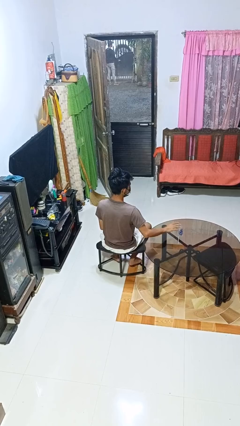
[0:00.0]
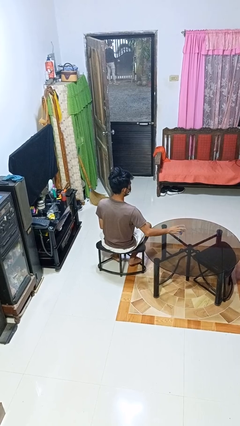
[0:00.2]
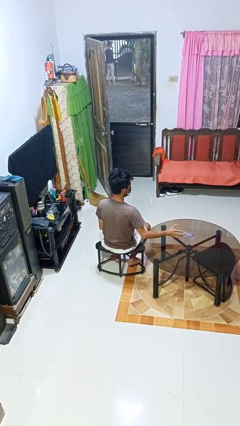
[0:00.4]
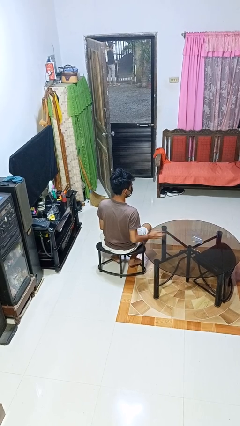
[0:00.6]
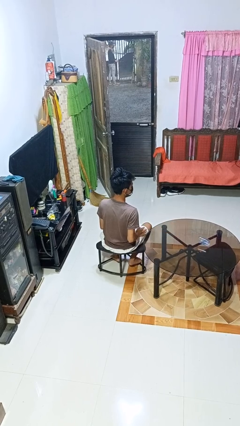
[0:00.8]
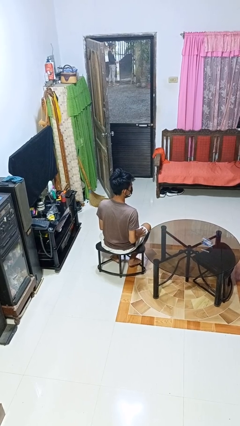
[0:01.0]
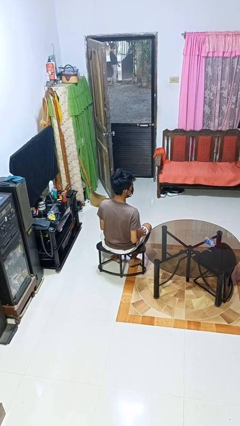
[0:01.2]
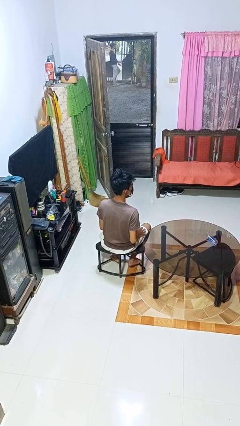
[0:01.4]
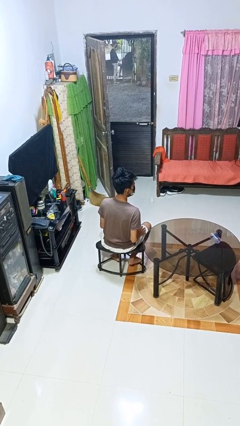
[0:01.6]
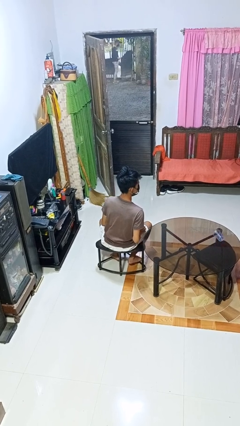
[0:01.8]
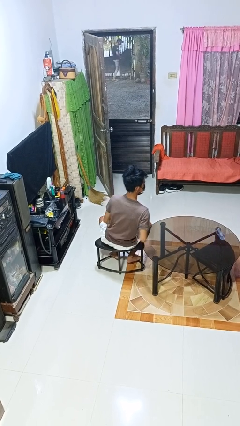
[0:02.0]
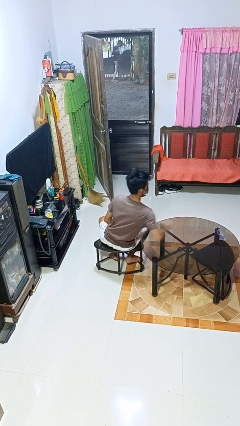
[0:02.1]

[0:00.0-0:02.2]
person knocks over glass

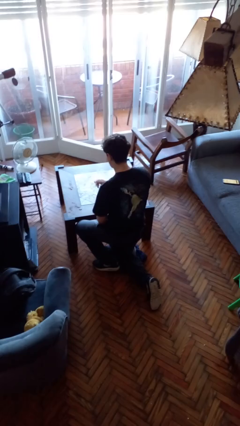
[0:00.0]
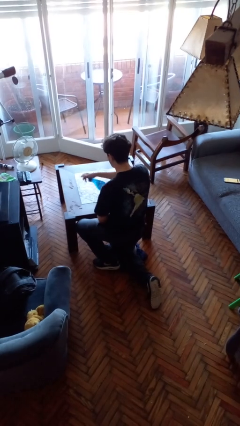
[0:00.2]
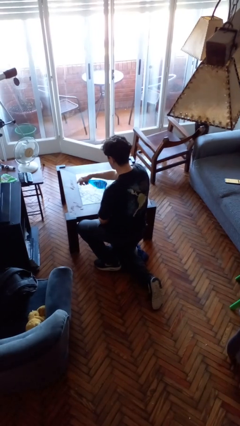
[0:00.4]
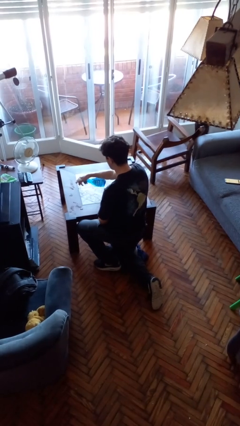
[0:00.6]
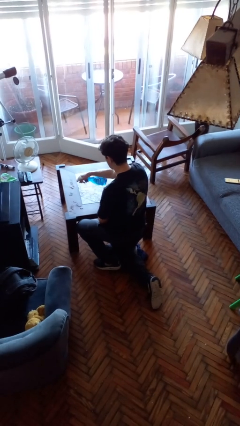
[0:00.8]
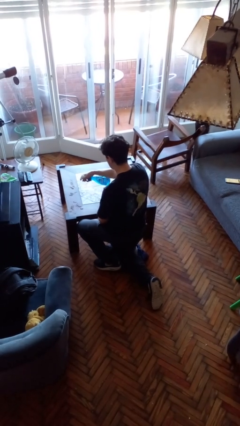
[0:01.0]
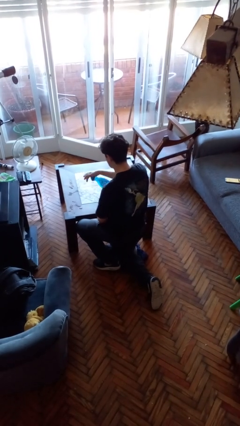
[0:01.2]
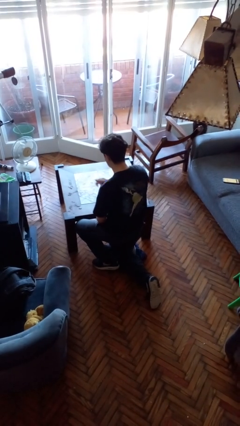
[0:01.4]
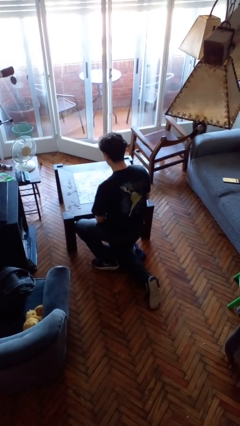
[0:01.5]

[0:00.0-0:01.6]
person sprays from bottle

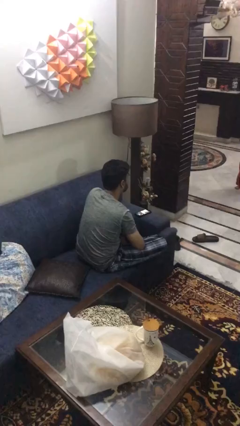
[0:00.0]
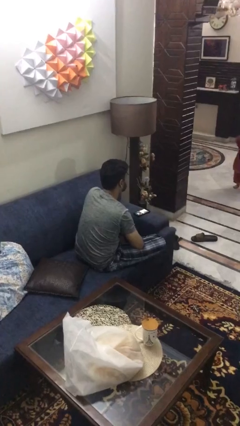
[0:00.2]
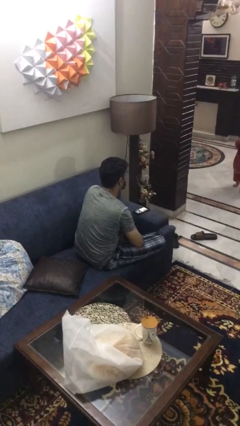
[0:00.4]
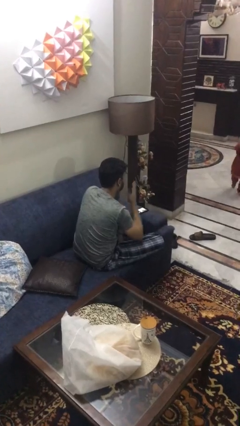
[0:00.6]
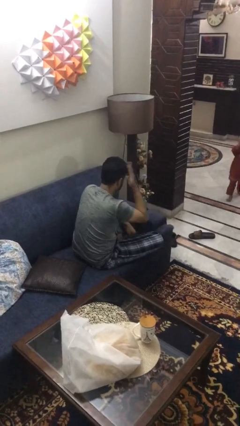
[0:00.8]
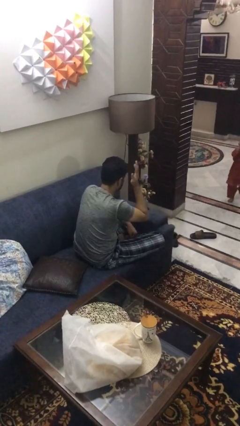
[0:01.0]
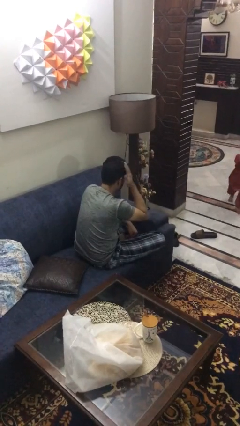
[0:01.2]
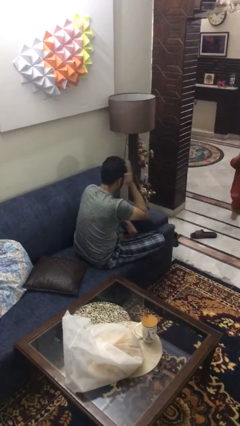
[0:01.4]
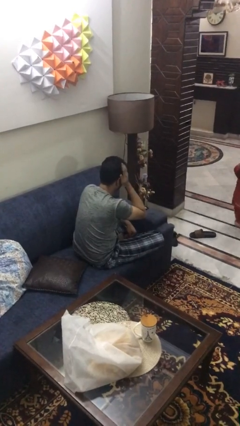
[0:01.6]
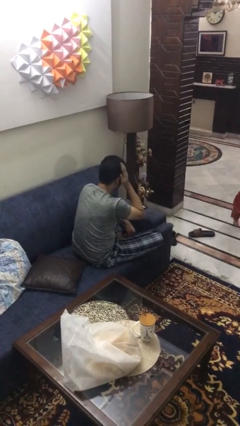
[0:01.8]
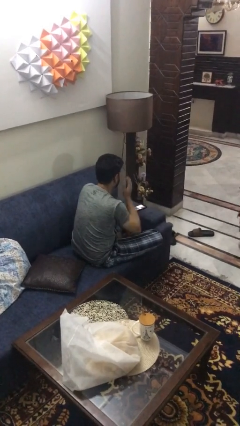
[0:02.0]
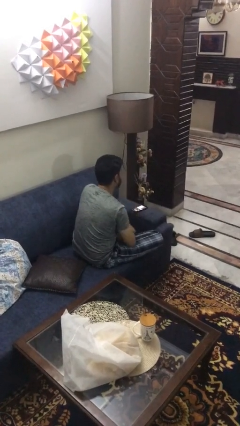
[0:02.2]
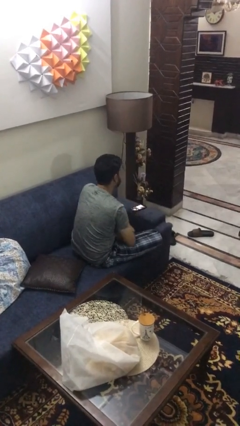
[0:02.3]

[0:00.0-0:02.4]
person strokes hair

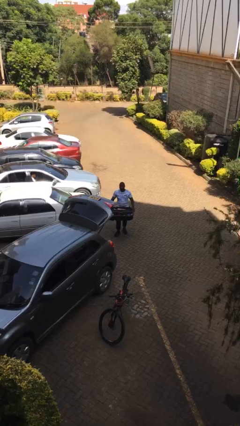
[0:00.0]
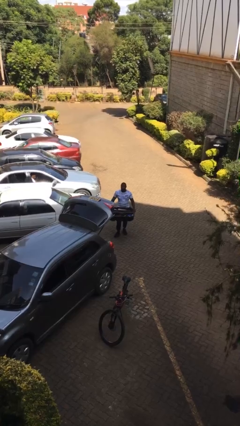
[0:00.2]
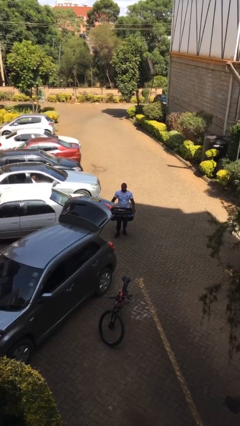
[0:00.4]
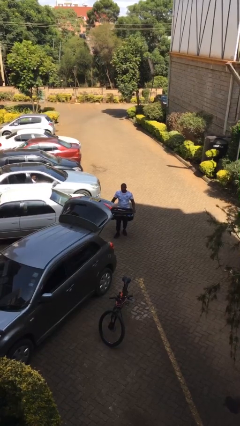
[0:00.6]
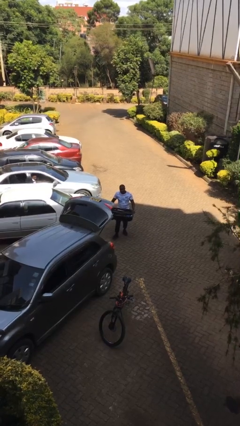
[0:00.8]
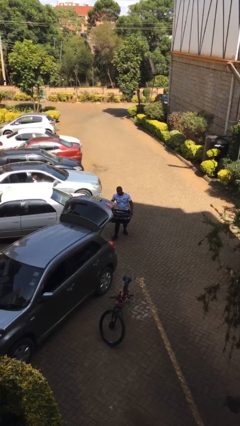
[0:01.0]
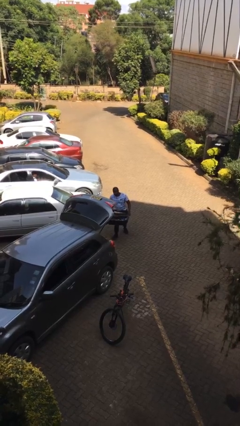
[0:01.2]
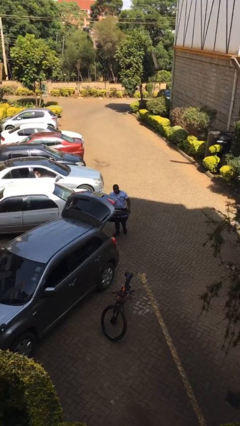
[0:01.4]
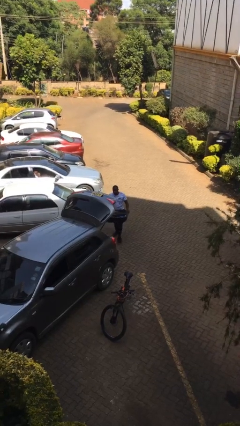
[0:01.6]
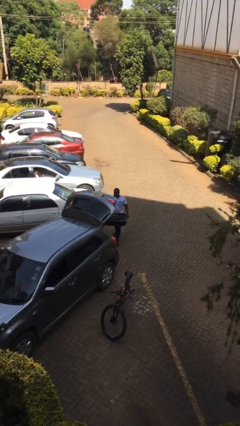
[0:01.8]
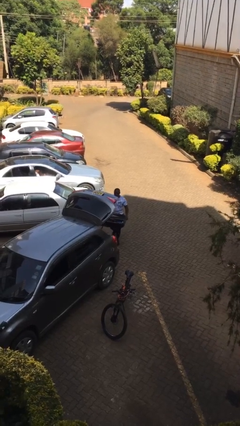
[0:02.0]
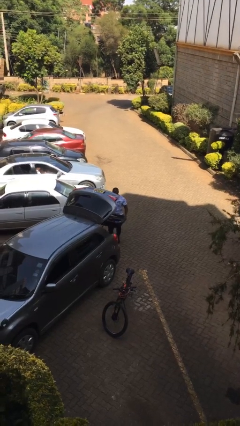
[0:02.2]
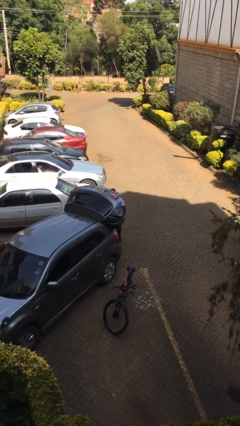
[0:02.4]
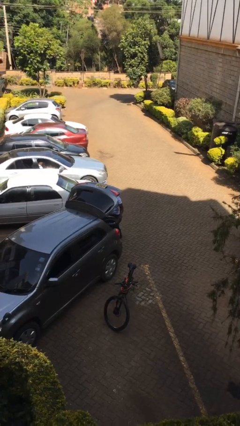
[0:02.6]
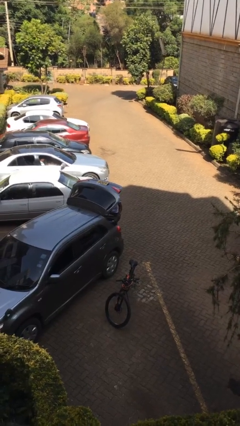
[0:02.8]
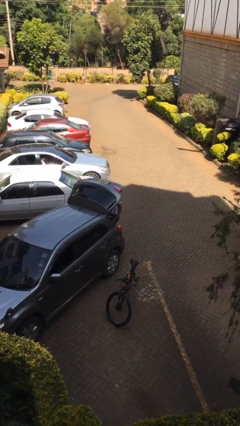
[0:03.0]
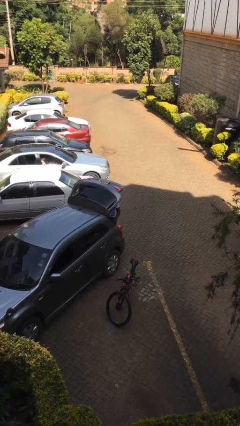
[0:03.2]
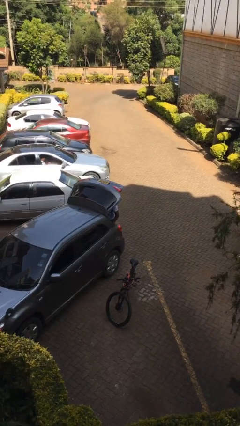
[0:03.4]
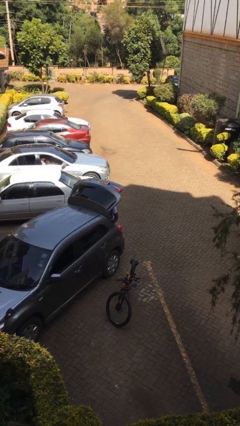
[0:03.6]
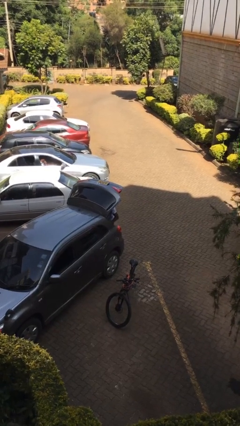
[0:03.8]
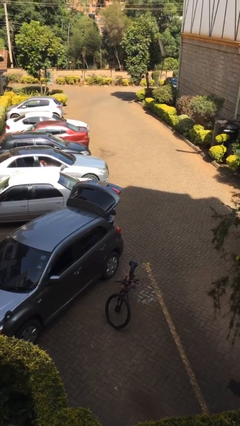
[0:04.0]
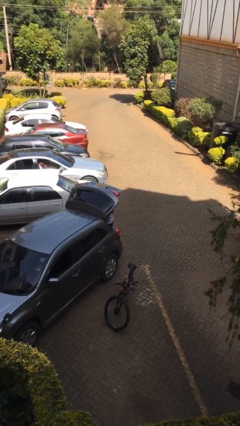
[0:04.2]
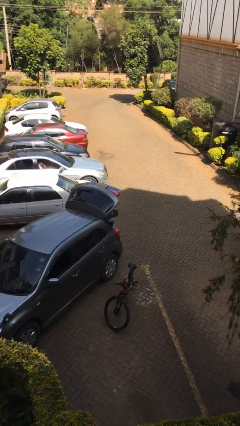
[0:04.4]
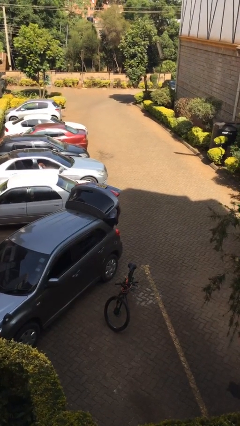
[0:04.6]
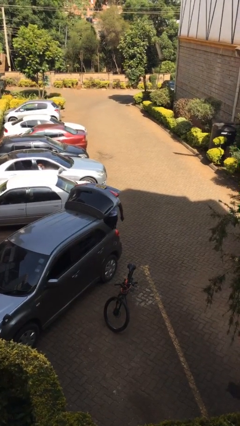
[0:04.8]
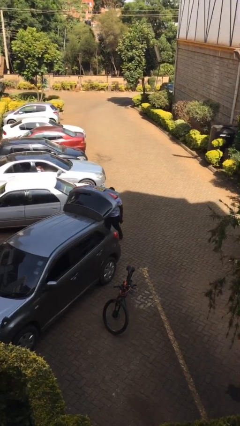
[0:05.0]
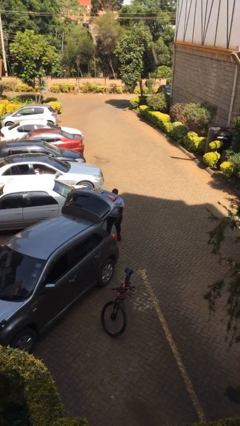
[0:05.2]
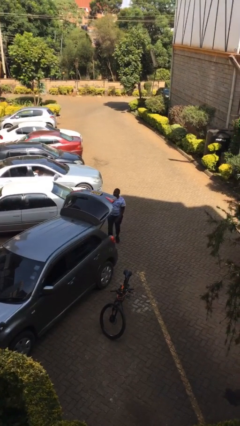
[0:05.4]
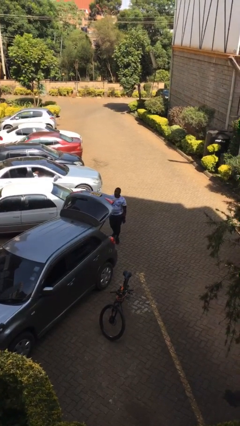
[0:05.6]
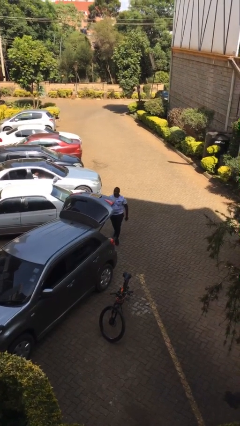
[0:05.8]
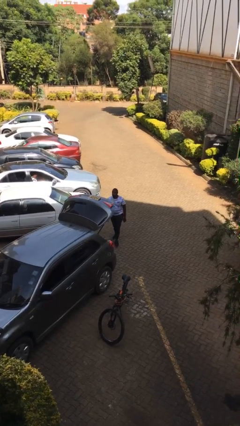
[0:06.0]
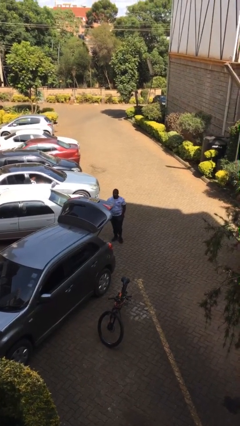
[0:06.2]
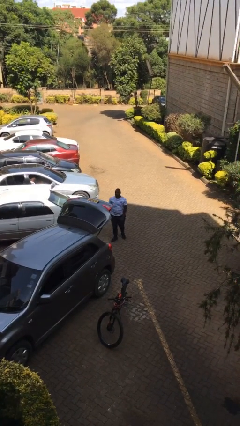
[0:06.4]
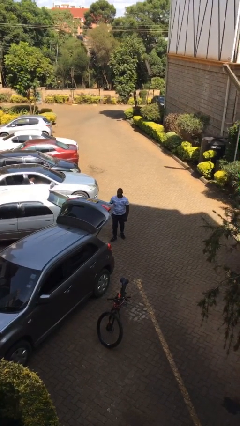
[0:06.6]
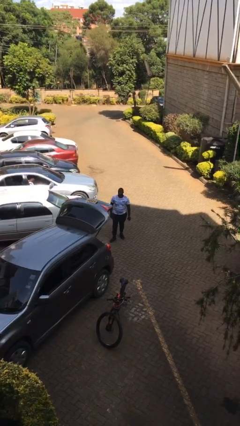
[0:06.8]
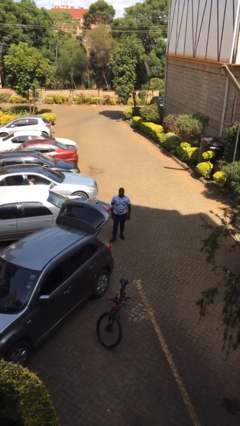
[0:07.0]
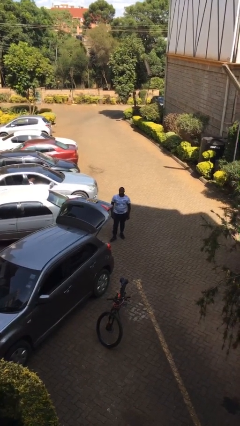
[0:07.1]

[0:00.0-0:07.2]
person loads car

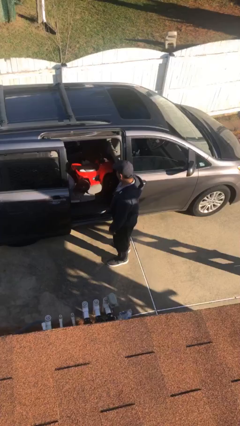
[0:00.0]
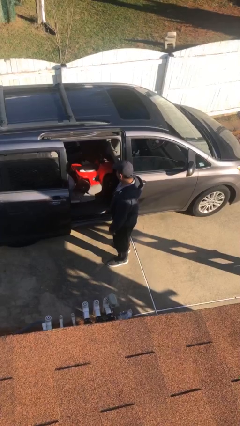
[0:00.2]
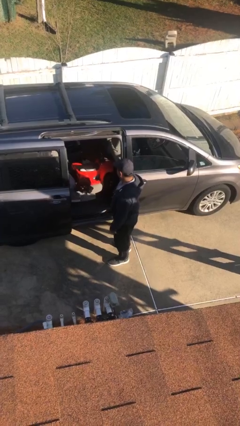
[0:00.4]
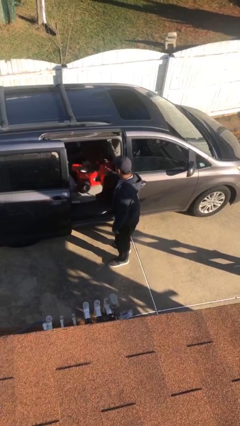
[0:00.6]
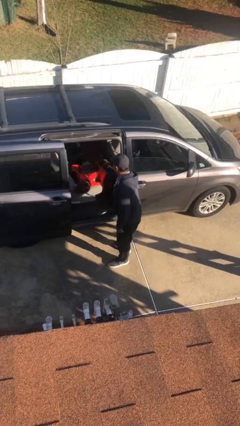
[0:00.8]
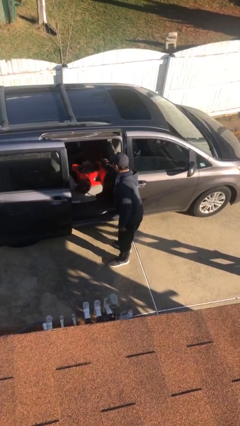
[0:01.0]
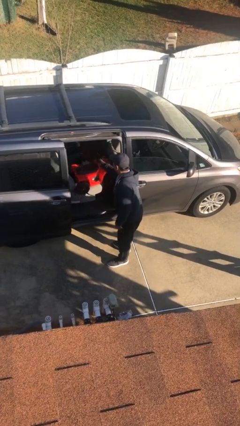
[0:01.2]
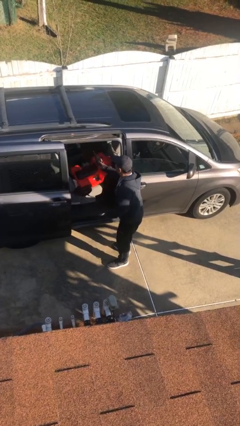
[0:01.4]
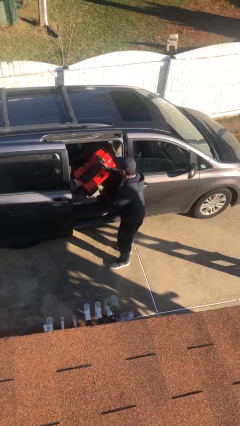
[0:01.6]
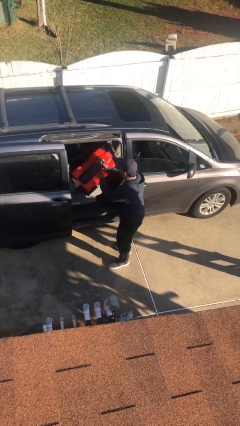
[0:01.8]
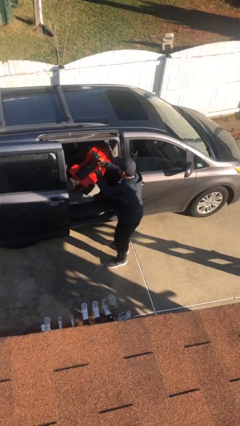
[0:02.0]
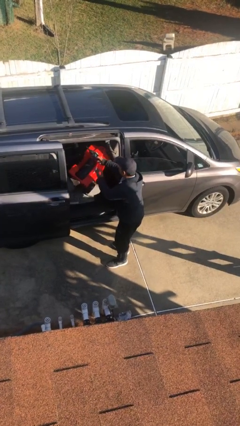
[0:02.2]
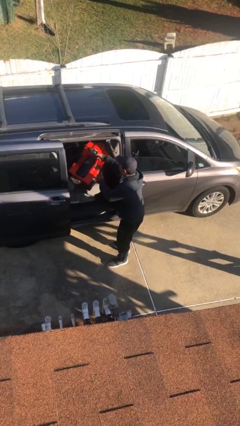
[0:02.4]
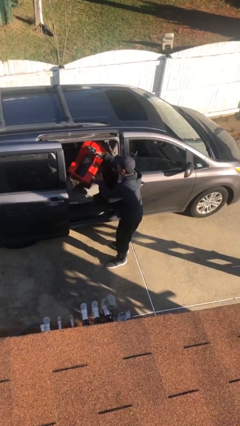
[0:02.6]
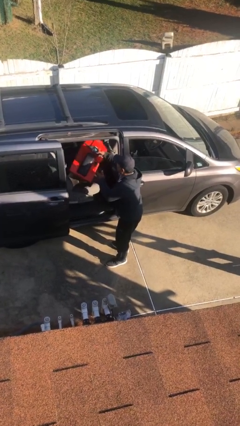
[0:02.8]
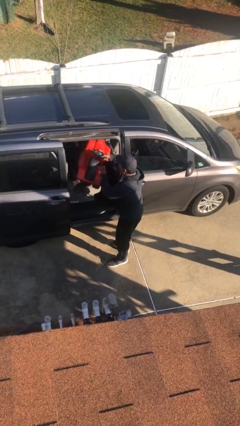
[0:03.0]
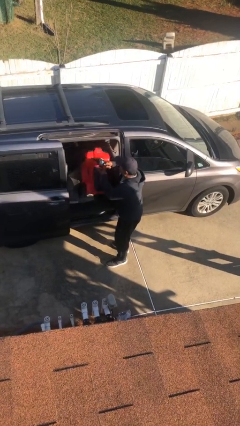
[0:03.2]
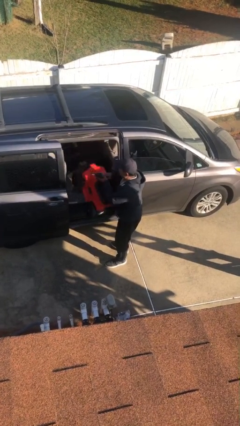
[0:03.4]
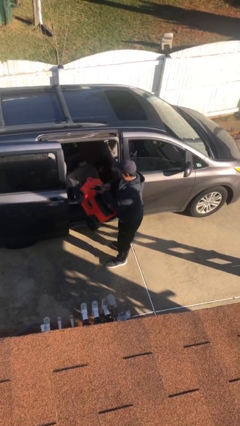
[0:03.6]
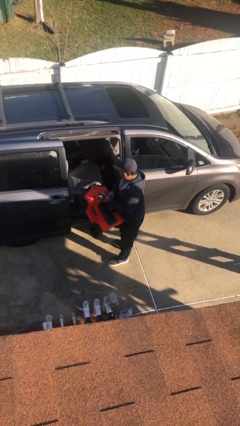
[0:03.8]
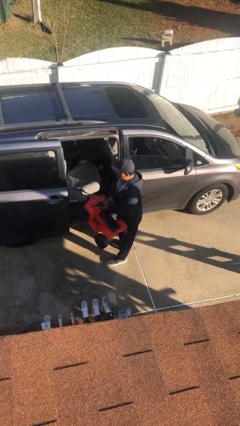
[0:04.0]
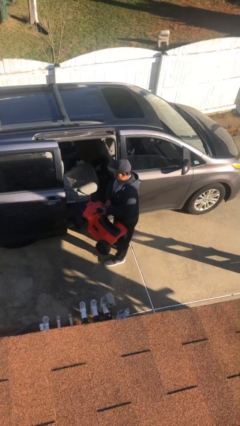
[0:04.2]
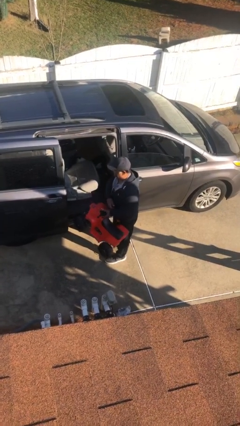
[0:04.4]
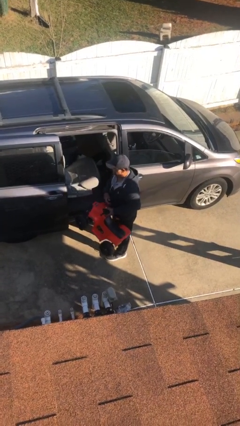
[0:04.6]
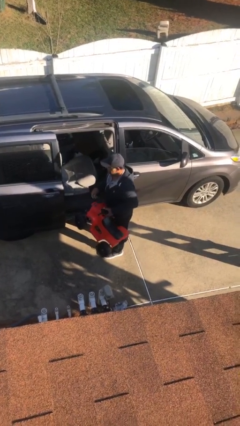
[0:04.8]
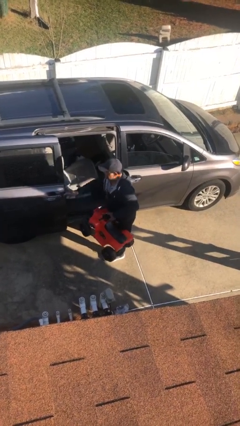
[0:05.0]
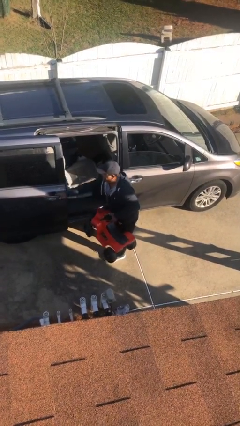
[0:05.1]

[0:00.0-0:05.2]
person unloads car
